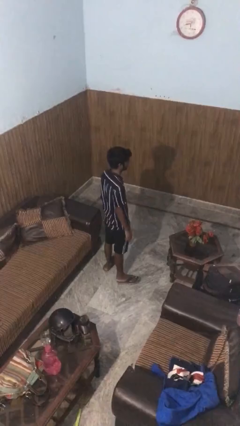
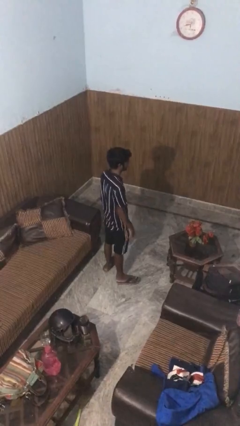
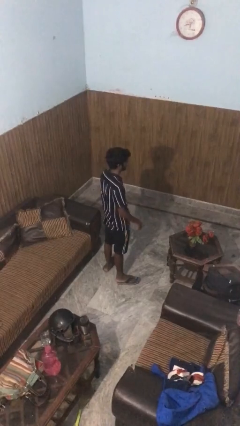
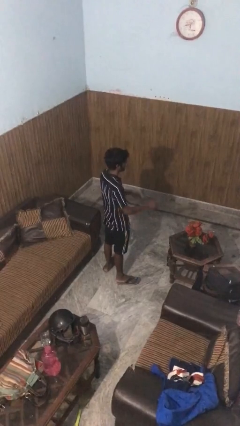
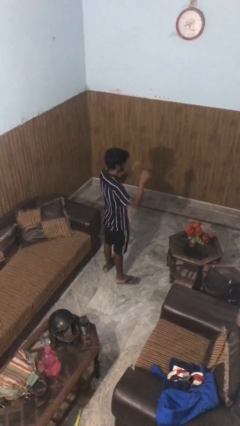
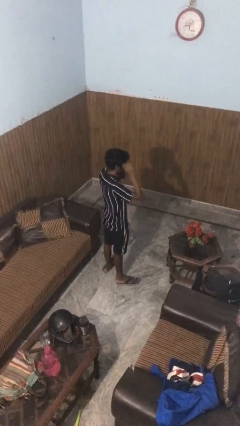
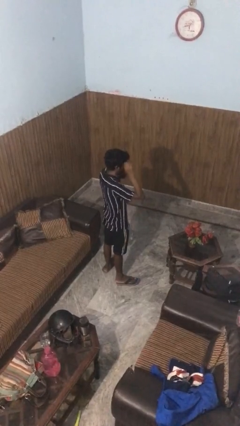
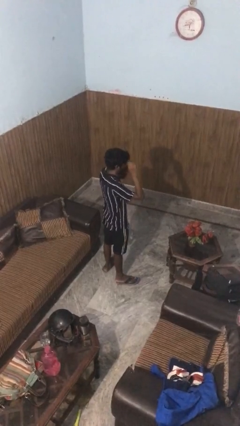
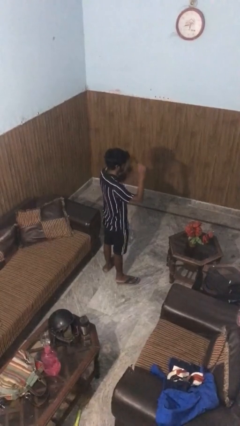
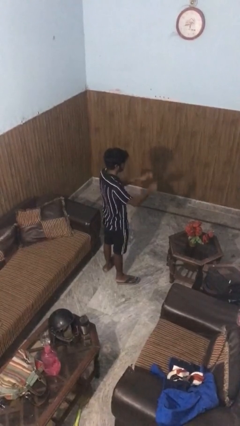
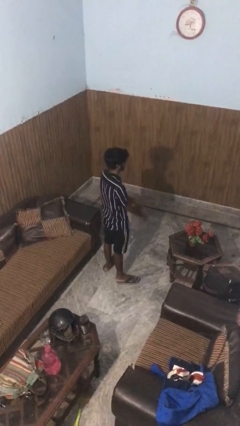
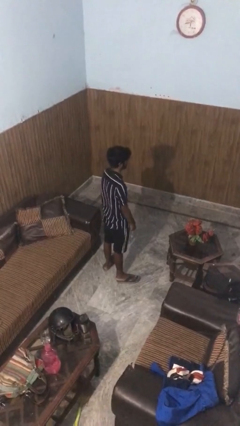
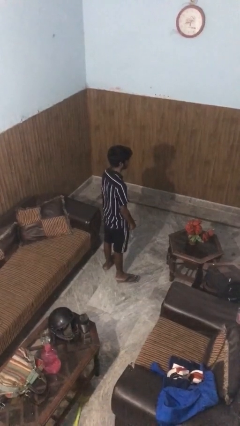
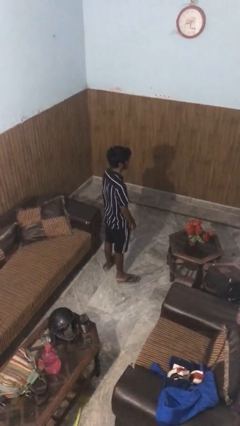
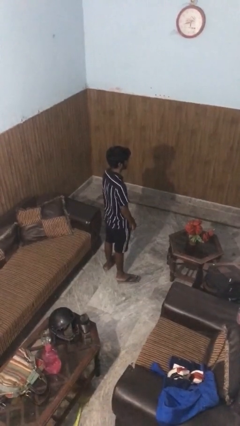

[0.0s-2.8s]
person takes off glasses

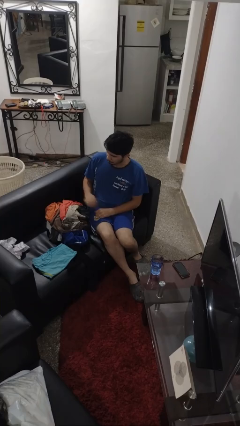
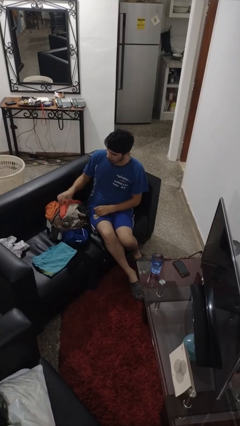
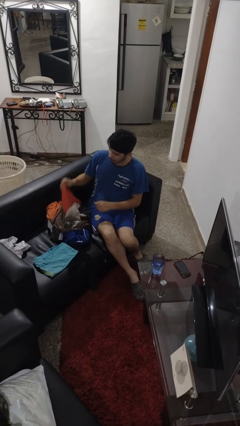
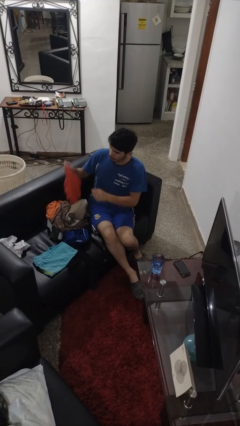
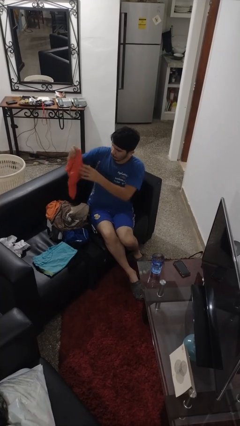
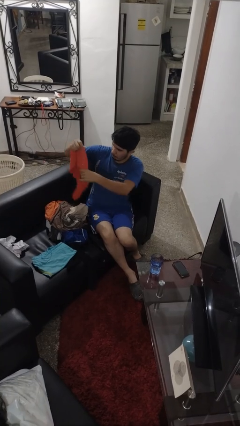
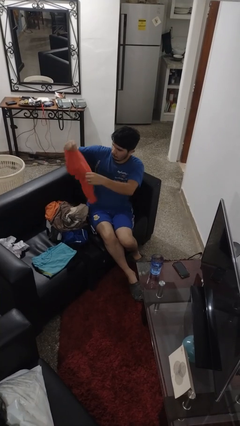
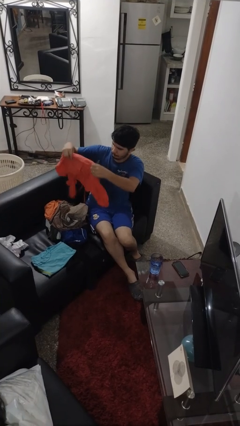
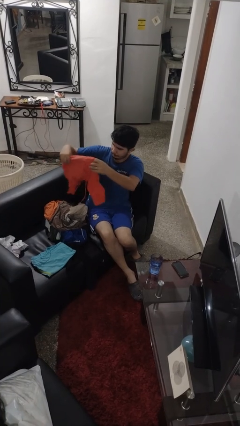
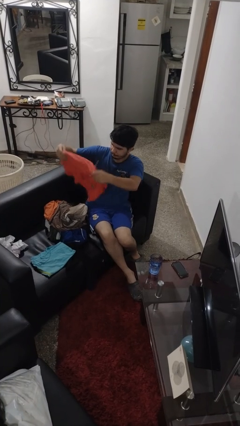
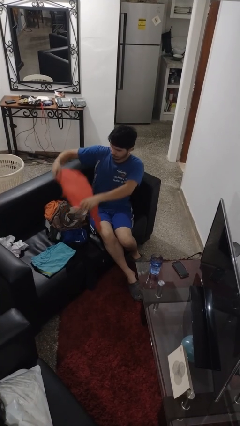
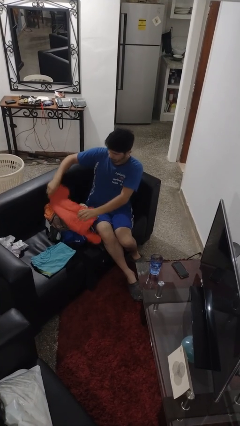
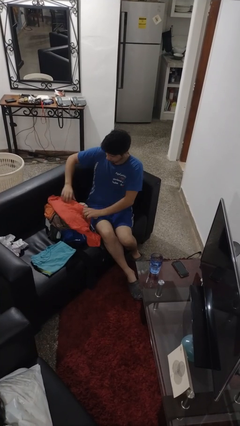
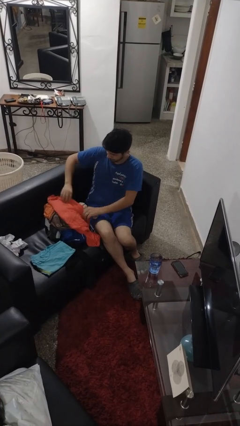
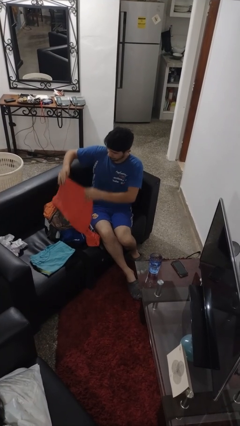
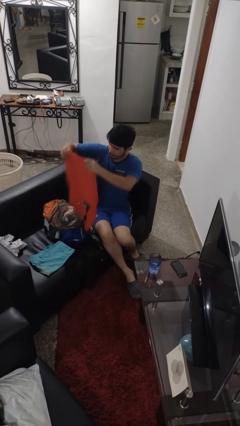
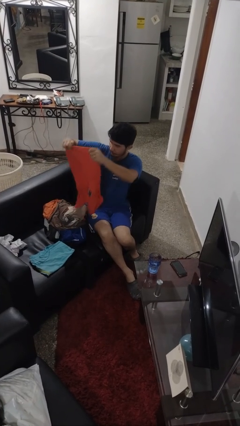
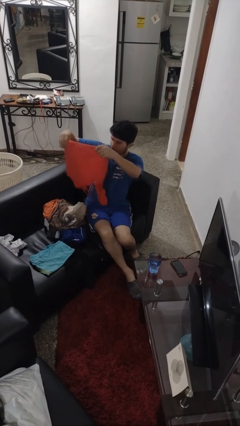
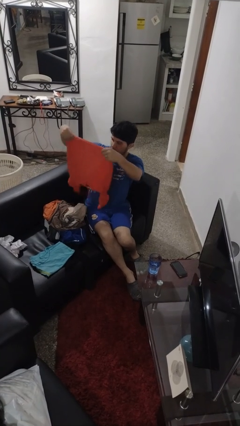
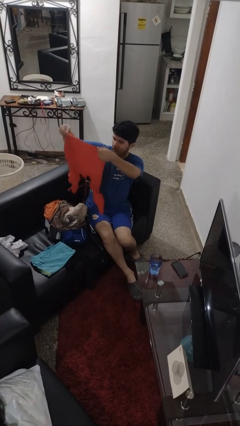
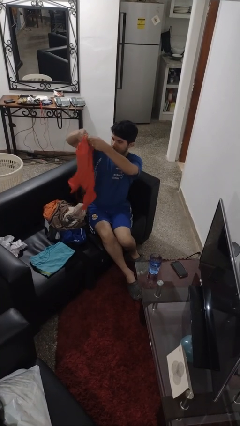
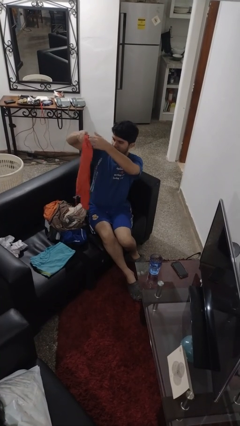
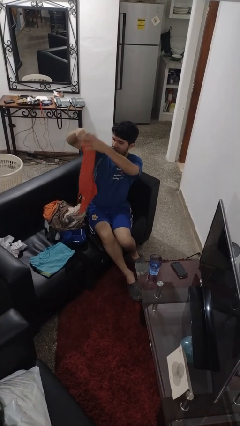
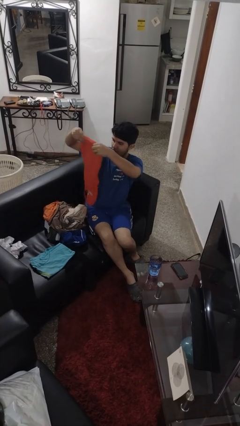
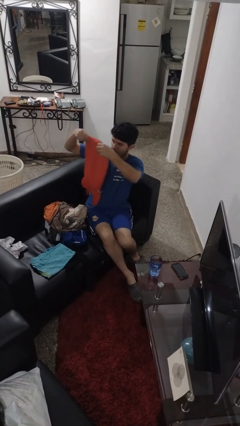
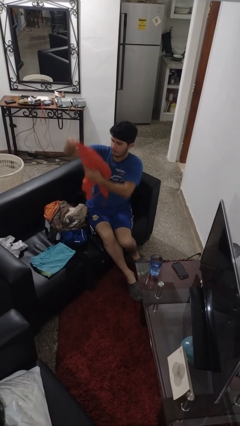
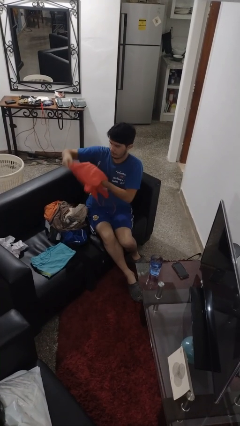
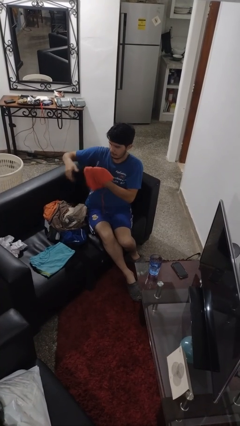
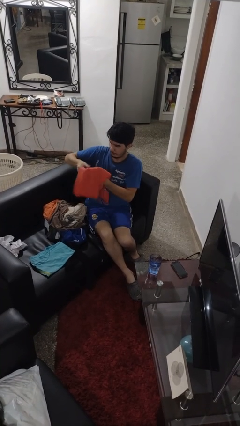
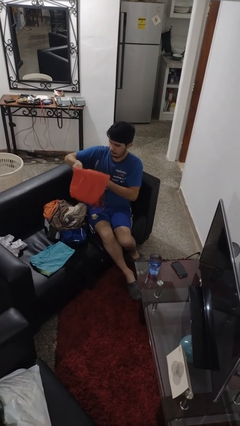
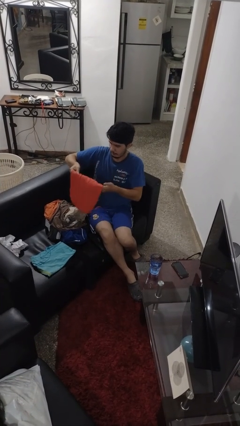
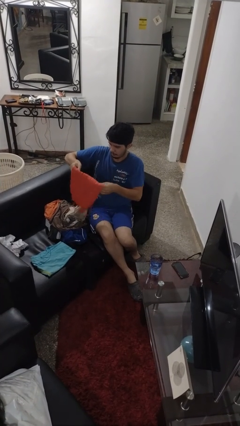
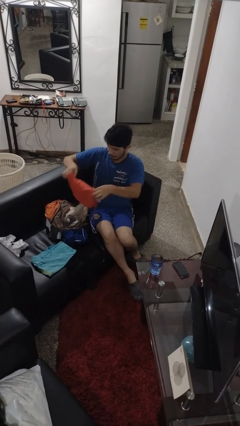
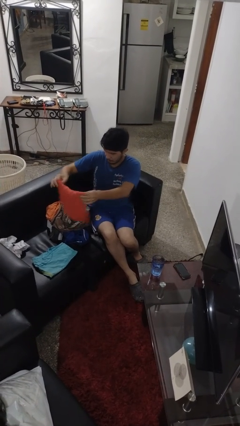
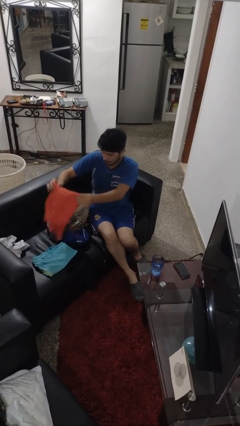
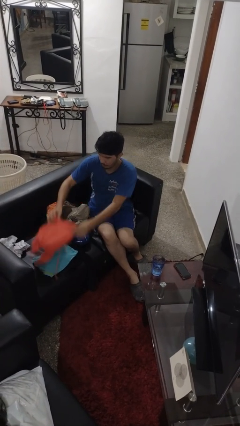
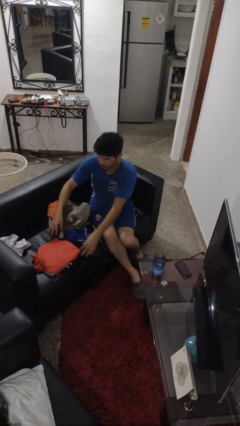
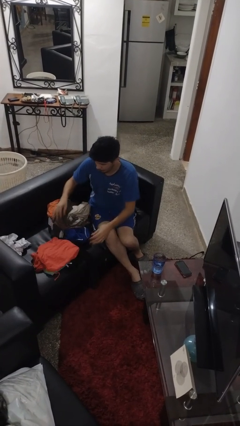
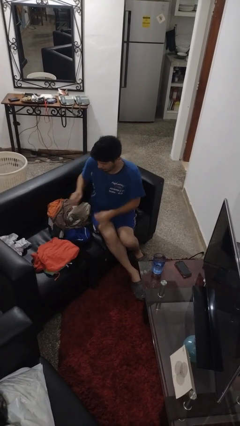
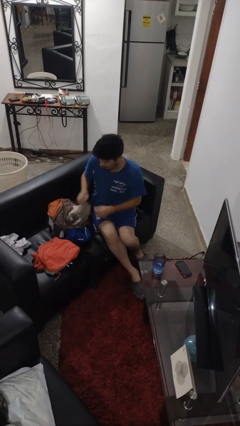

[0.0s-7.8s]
person folds shirt

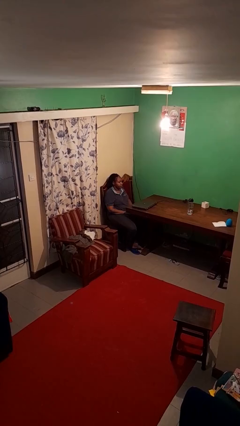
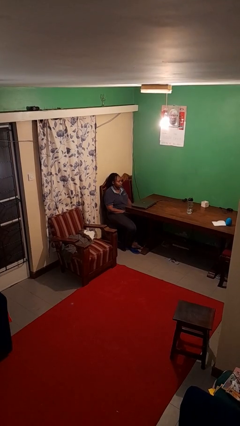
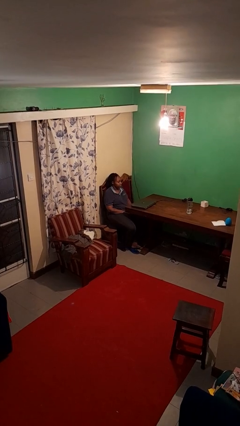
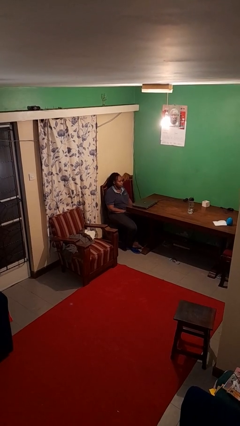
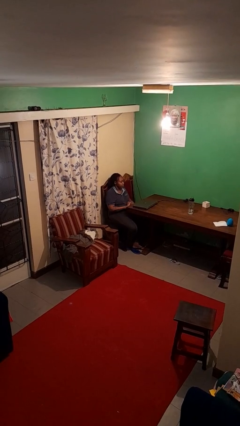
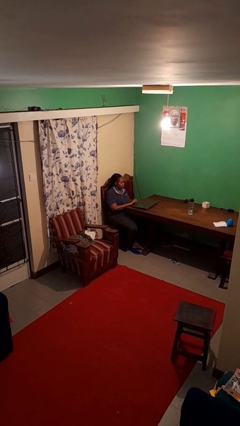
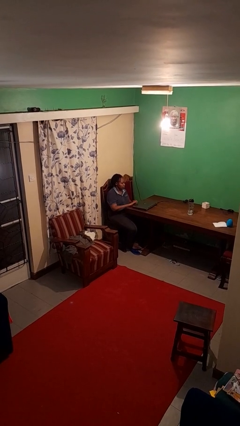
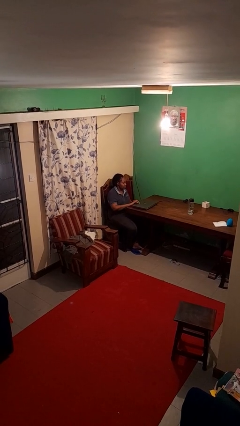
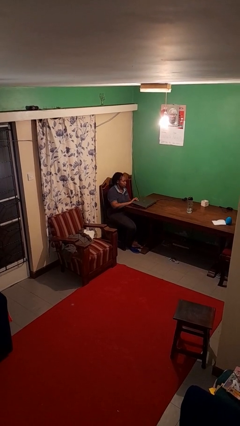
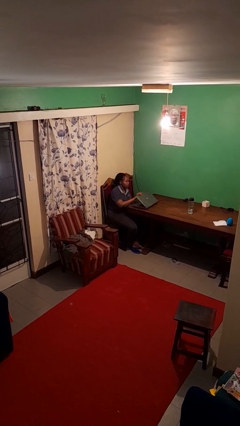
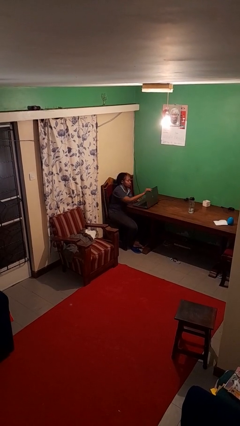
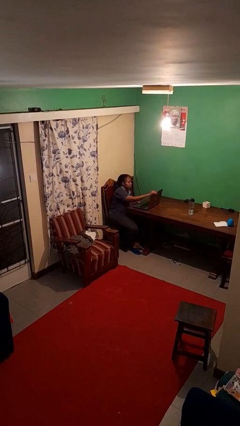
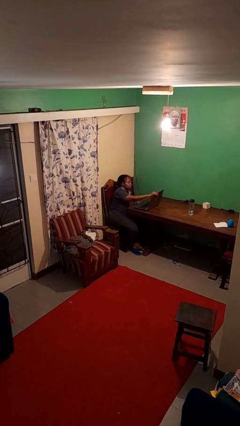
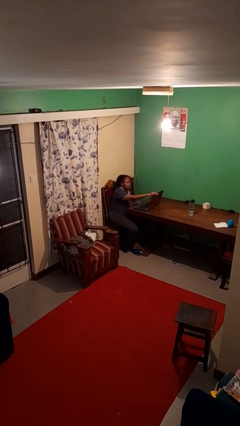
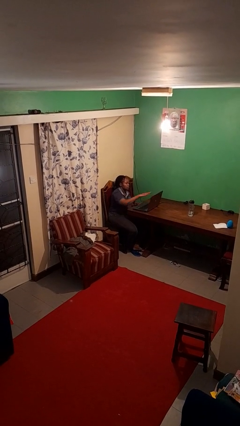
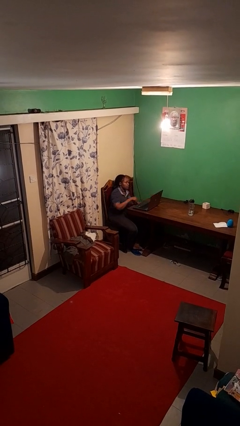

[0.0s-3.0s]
person opens laptop

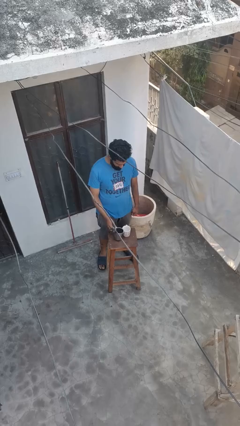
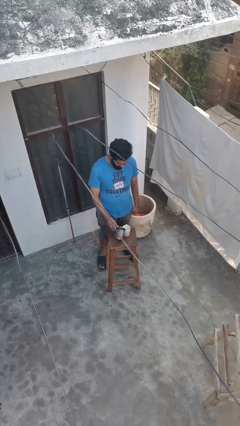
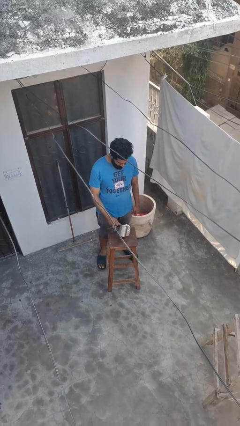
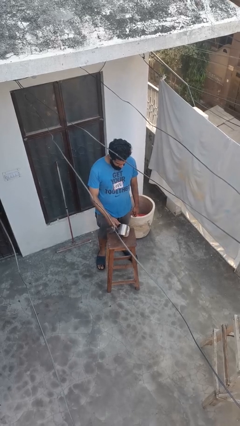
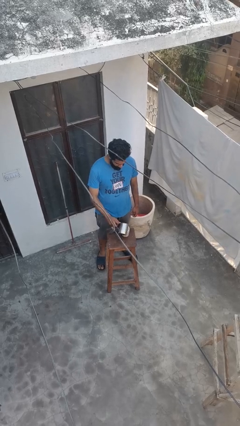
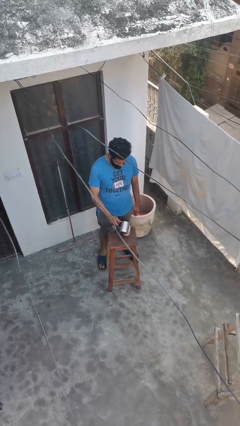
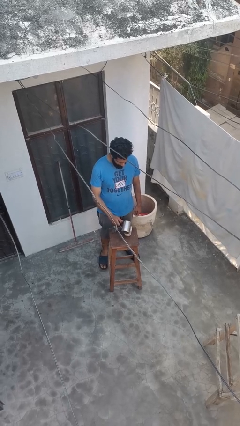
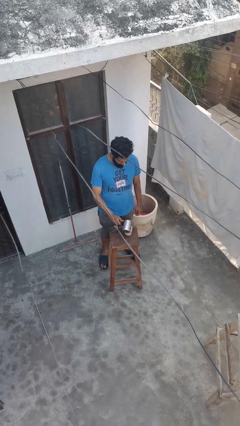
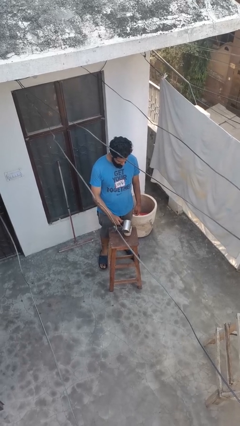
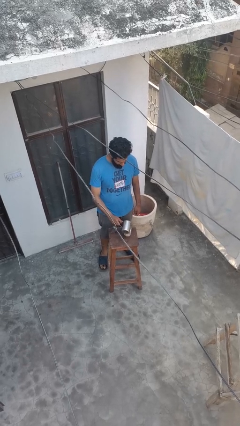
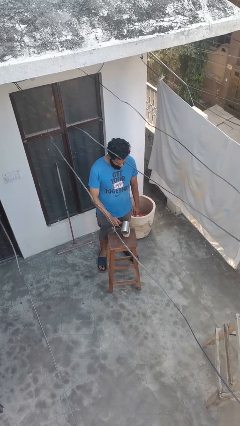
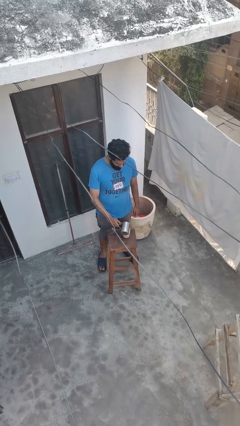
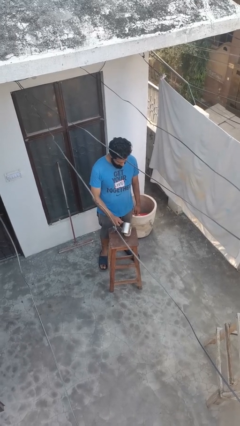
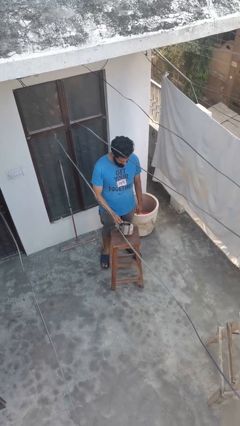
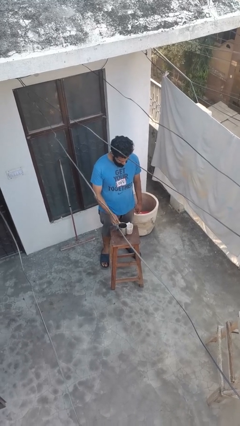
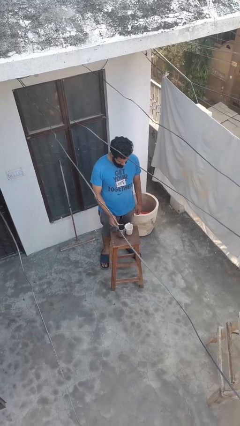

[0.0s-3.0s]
person pours coffee into mug

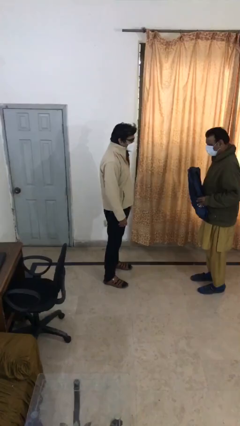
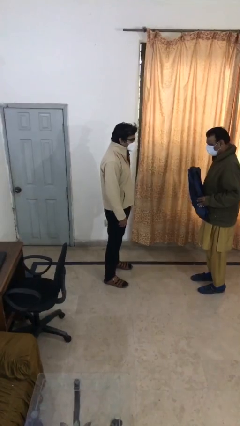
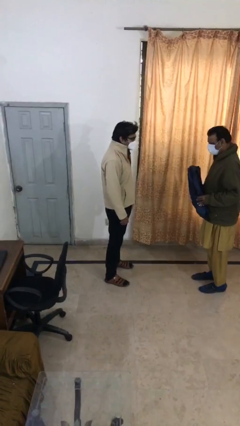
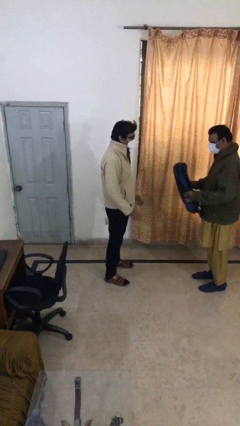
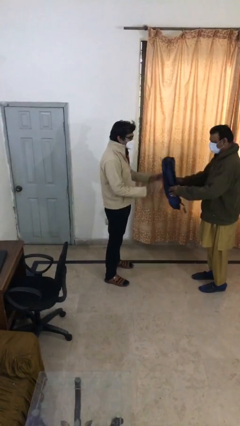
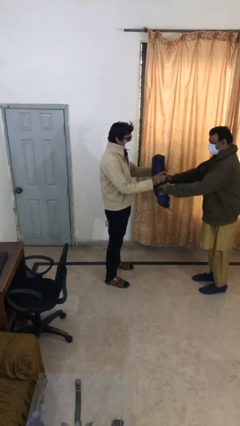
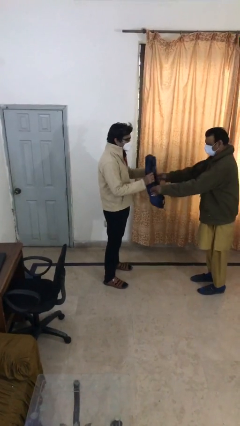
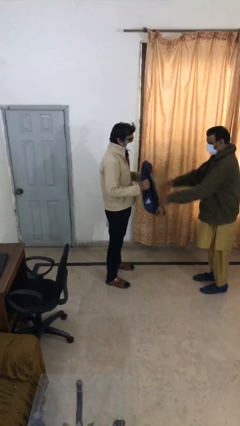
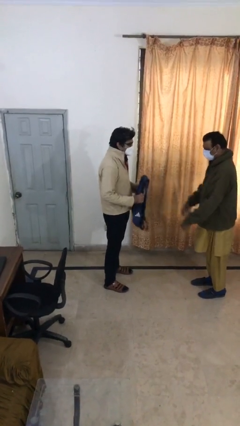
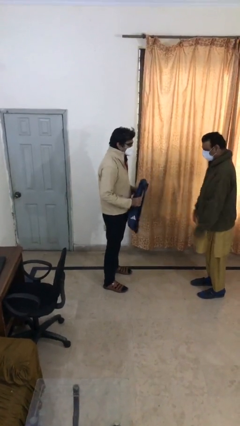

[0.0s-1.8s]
person transfers object to person
